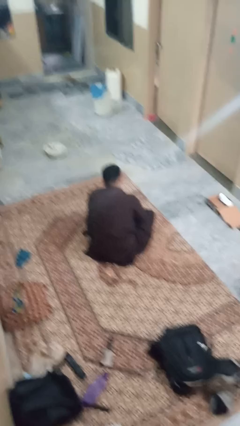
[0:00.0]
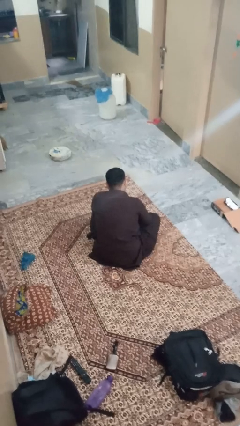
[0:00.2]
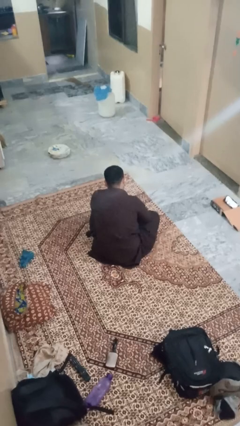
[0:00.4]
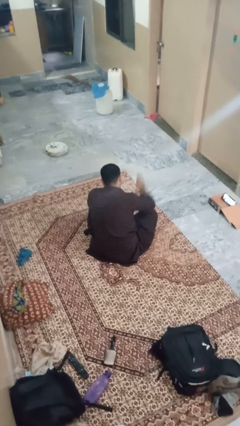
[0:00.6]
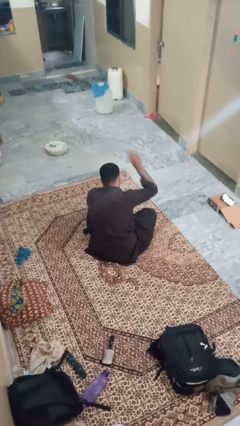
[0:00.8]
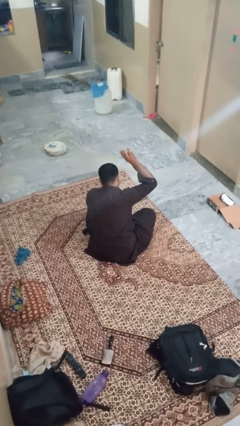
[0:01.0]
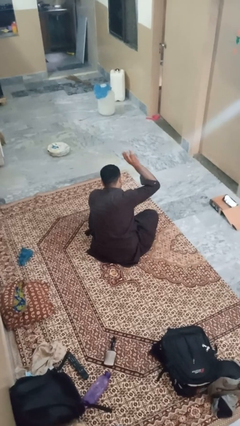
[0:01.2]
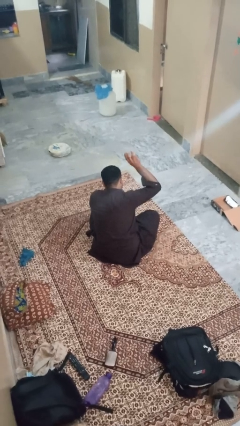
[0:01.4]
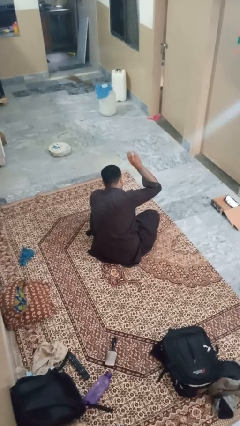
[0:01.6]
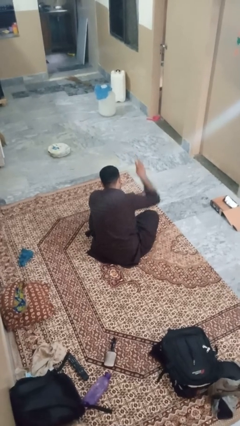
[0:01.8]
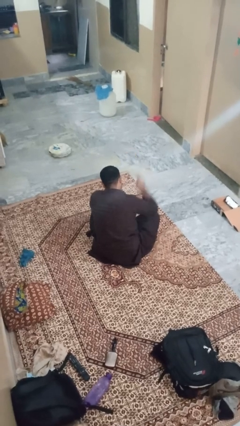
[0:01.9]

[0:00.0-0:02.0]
person gestures number three

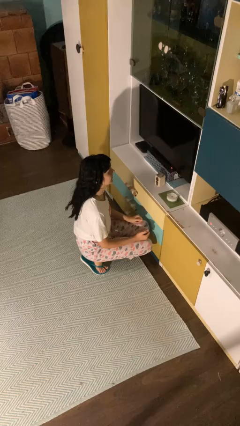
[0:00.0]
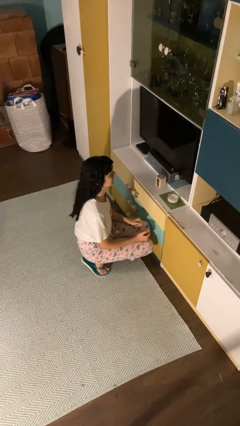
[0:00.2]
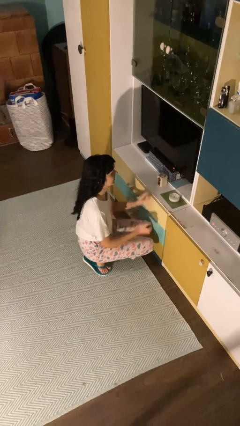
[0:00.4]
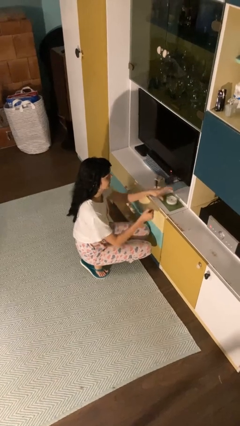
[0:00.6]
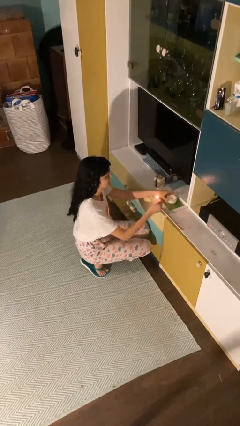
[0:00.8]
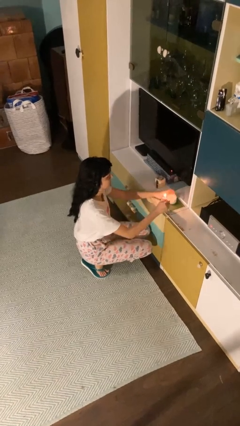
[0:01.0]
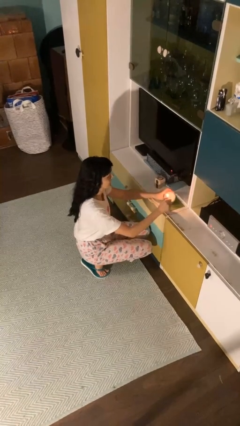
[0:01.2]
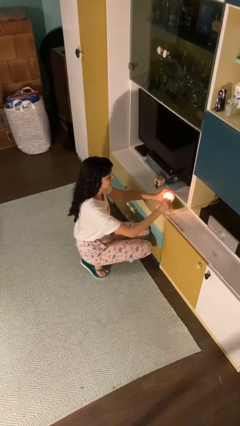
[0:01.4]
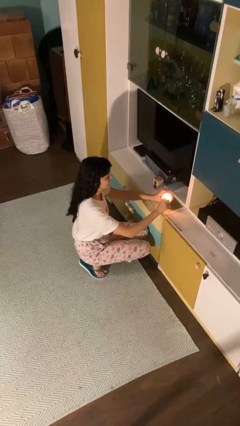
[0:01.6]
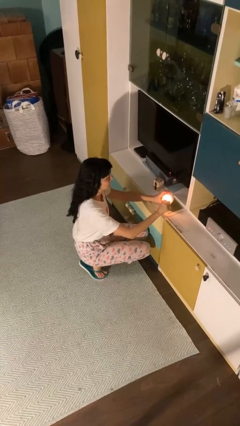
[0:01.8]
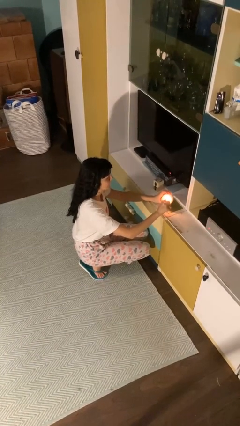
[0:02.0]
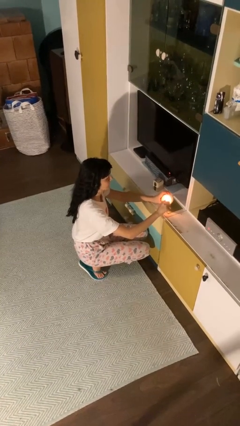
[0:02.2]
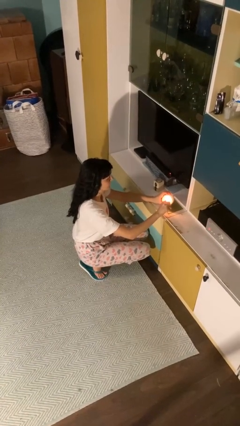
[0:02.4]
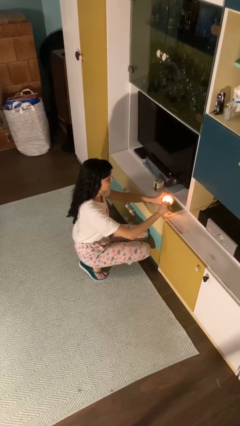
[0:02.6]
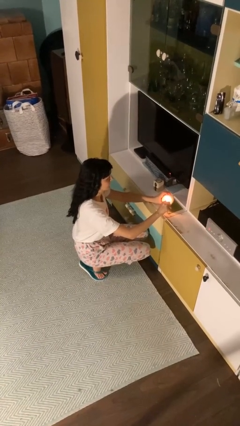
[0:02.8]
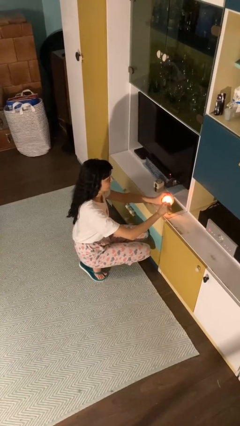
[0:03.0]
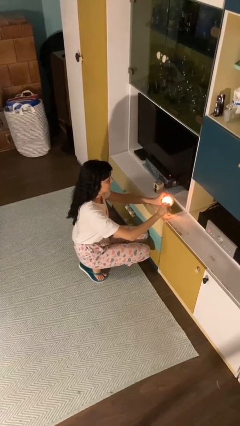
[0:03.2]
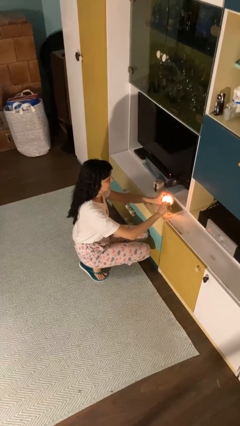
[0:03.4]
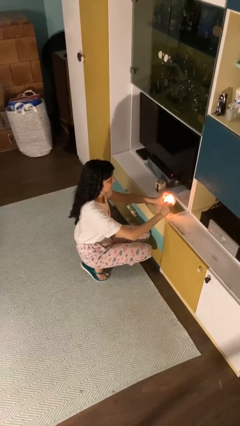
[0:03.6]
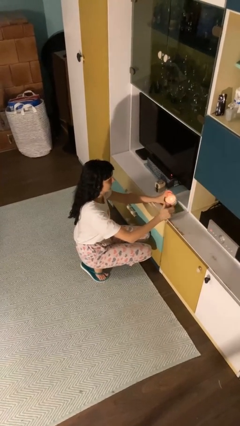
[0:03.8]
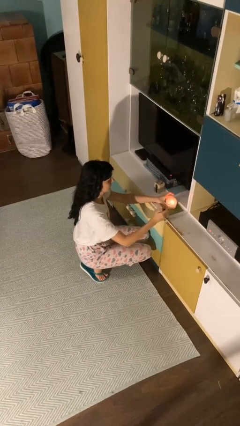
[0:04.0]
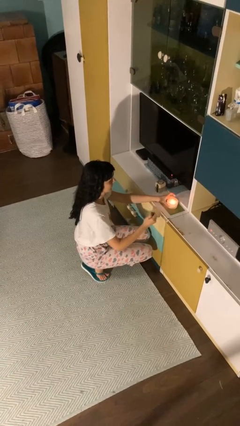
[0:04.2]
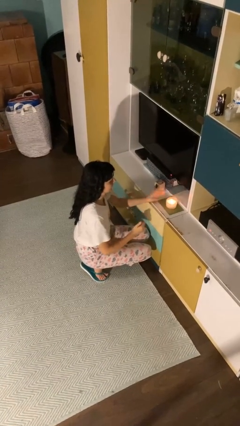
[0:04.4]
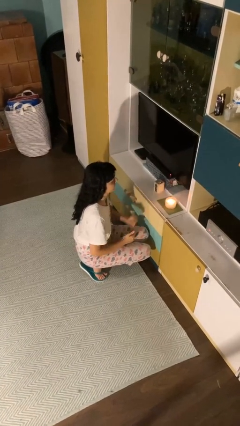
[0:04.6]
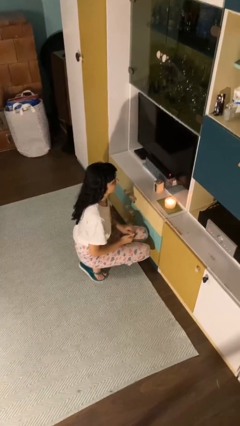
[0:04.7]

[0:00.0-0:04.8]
person lights candle

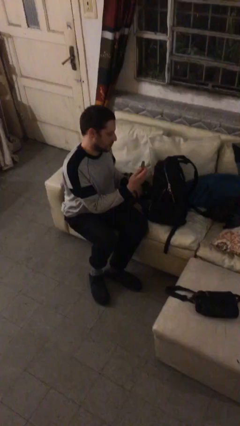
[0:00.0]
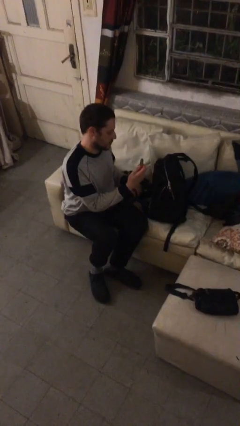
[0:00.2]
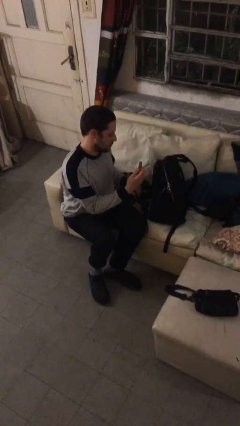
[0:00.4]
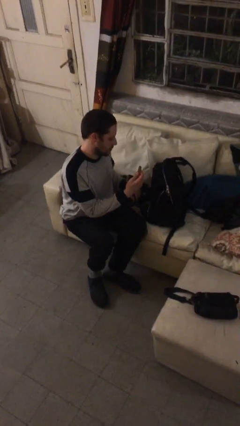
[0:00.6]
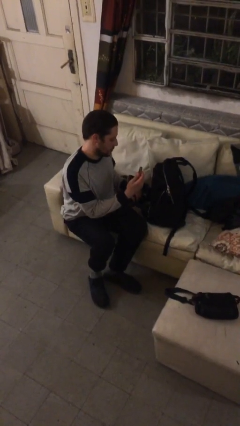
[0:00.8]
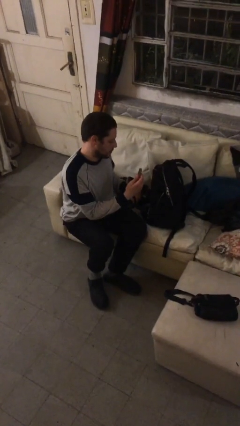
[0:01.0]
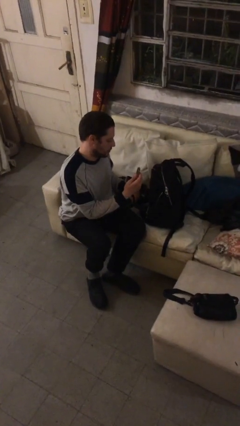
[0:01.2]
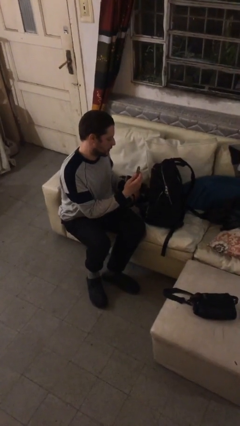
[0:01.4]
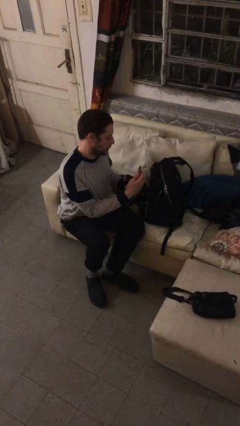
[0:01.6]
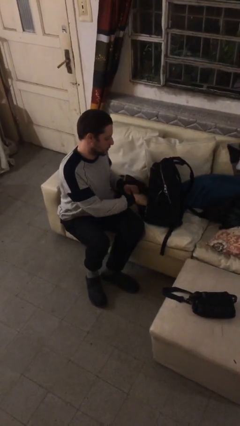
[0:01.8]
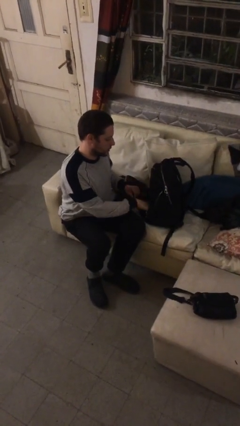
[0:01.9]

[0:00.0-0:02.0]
person takes object from backpack

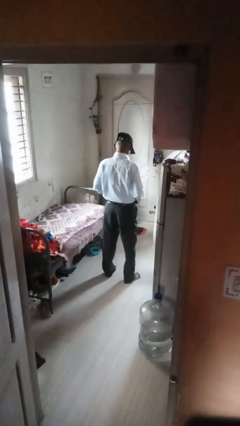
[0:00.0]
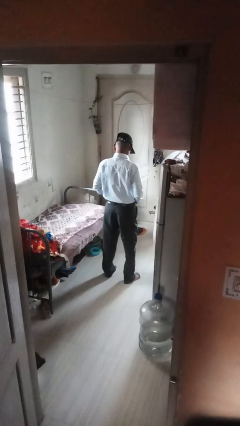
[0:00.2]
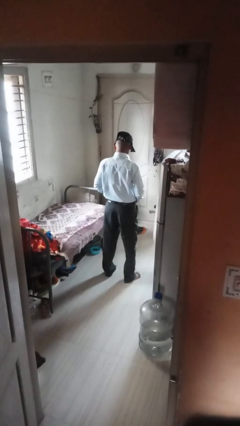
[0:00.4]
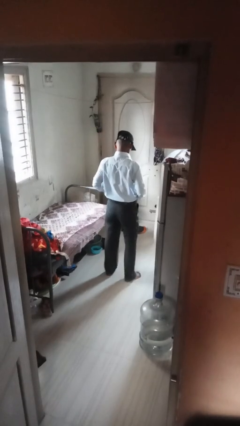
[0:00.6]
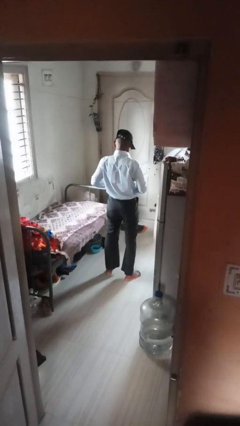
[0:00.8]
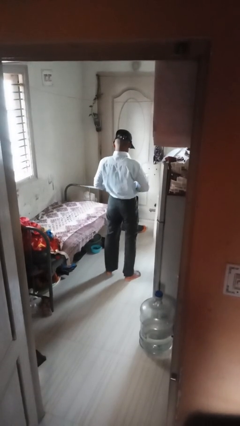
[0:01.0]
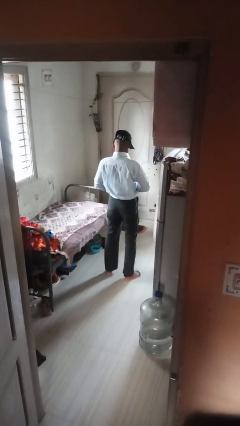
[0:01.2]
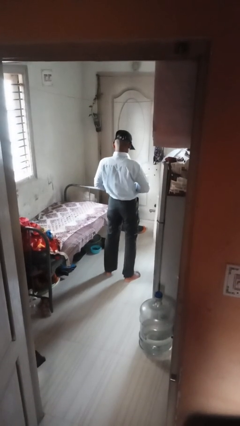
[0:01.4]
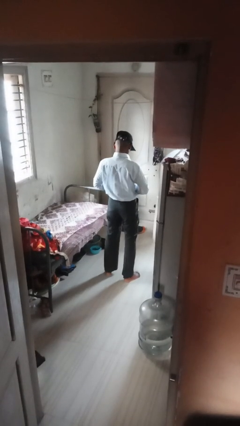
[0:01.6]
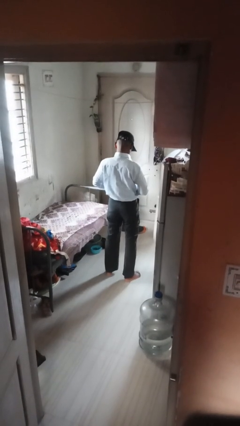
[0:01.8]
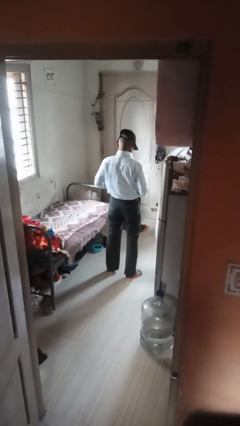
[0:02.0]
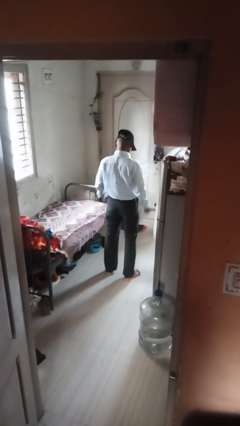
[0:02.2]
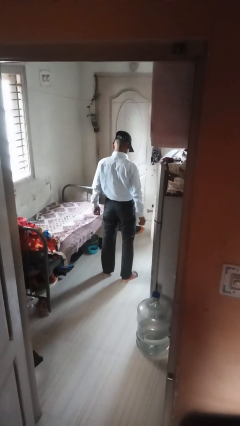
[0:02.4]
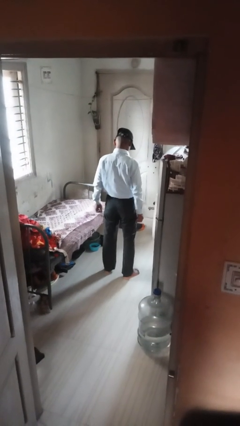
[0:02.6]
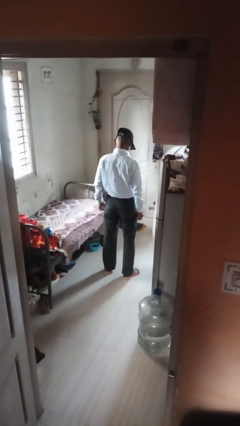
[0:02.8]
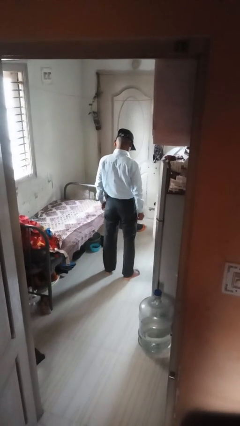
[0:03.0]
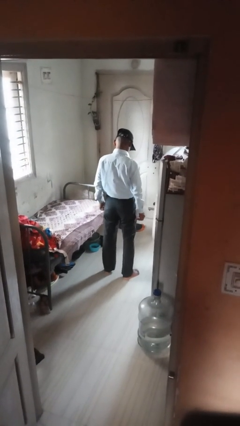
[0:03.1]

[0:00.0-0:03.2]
person hikes up pants

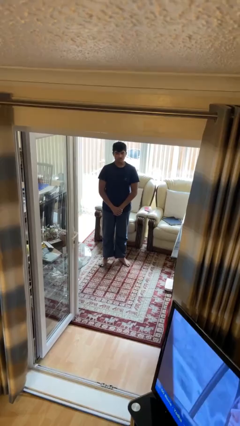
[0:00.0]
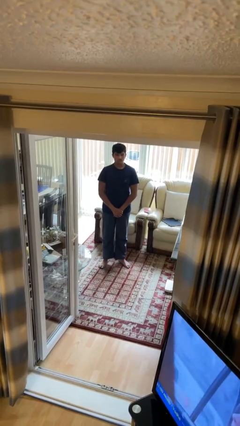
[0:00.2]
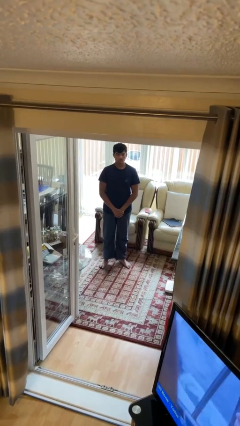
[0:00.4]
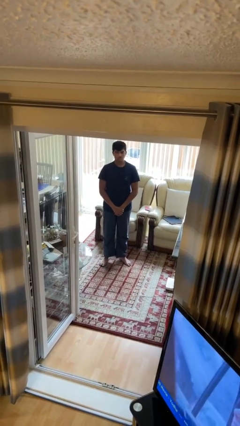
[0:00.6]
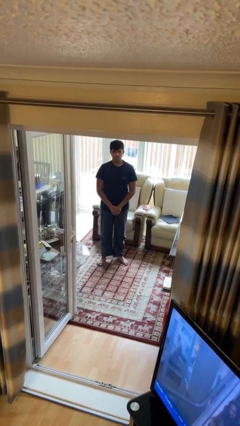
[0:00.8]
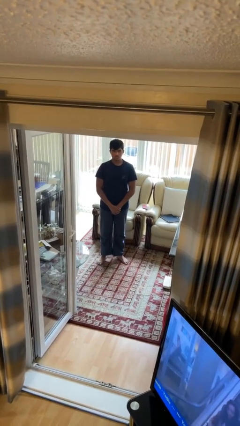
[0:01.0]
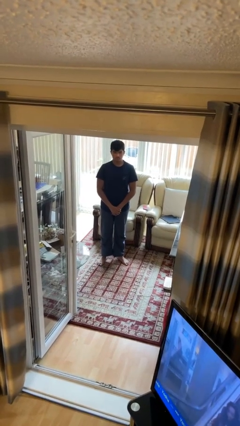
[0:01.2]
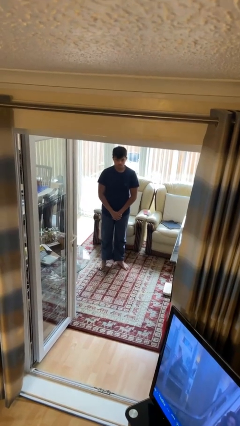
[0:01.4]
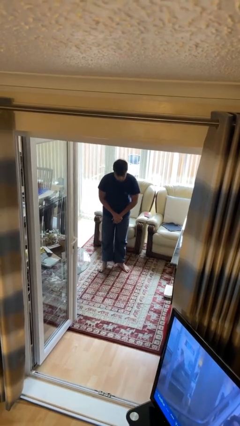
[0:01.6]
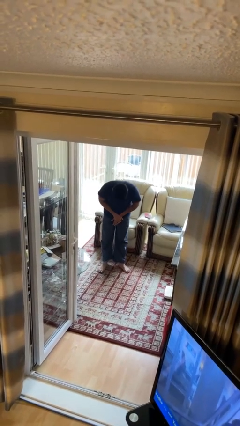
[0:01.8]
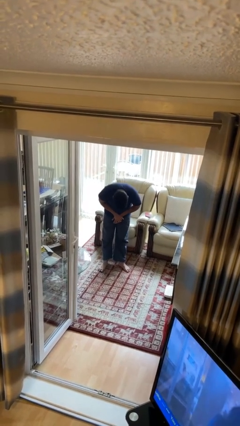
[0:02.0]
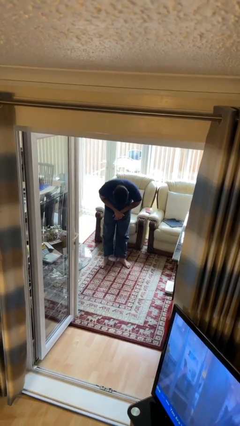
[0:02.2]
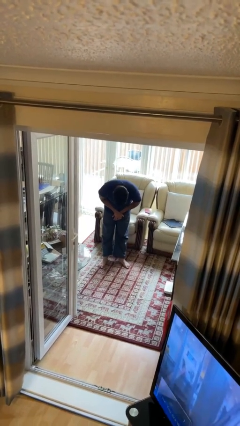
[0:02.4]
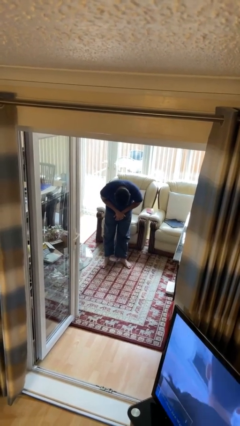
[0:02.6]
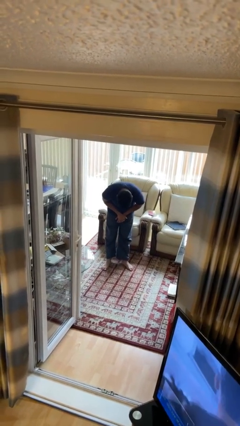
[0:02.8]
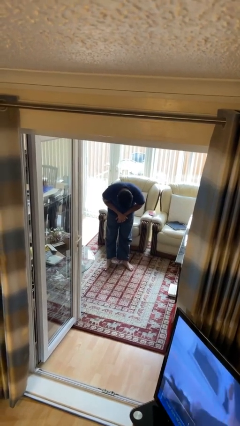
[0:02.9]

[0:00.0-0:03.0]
person bows

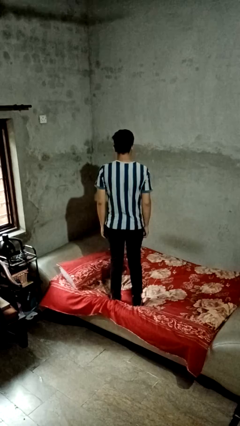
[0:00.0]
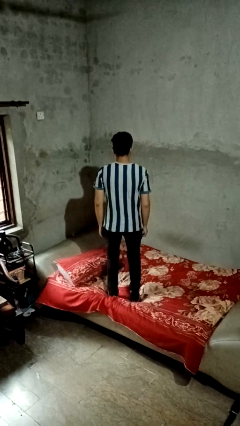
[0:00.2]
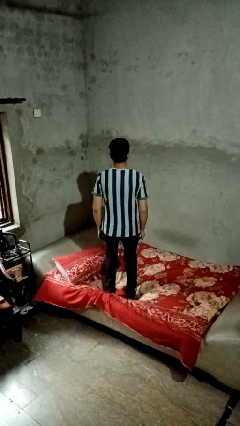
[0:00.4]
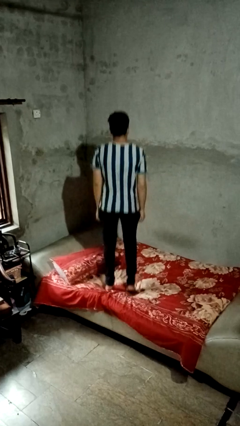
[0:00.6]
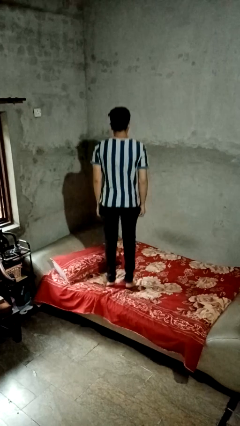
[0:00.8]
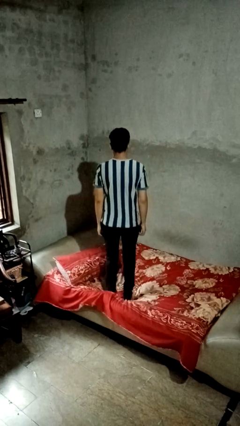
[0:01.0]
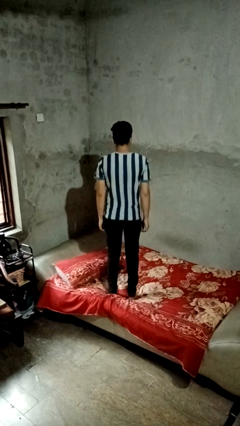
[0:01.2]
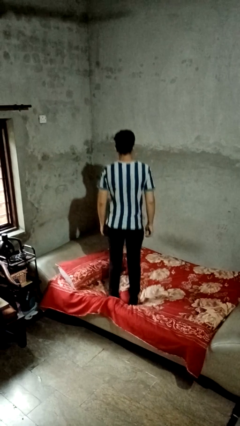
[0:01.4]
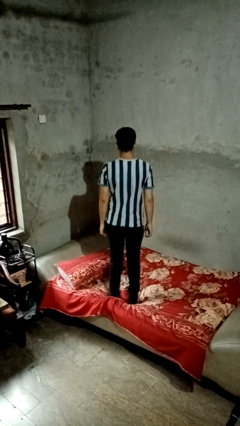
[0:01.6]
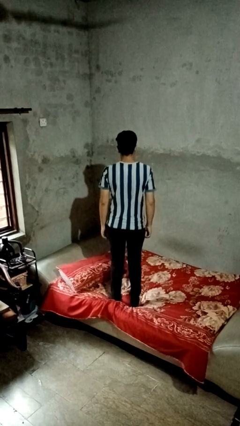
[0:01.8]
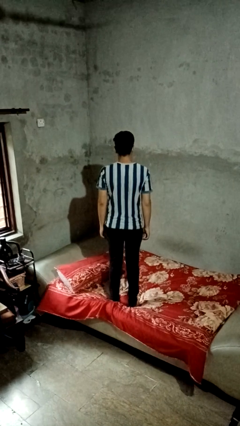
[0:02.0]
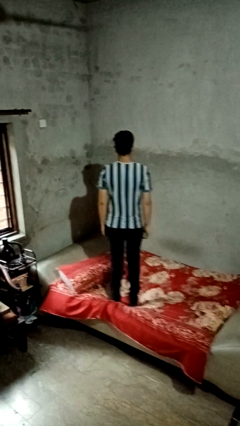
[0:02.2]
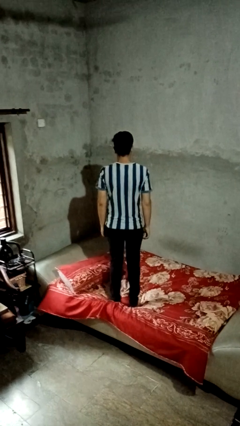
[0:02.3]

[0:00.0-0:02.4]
person jumps on bed
